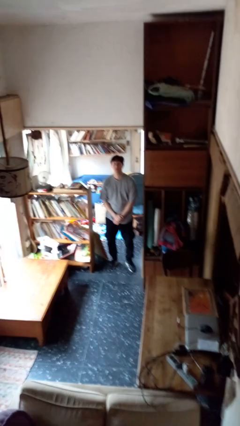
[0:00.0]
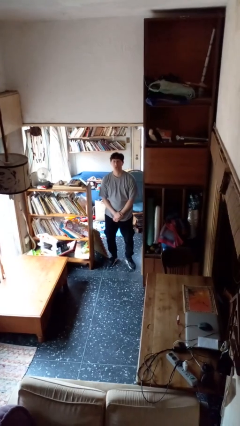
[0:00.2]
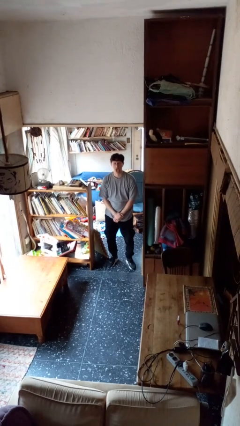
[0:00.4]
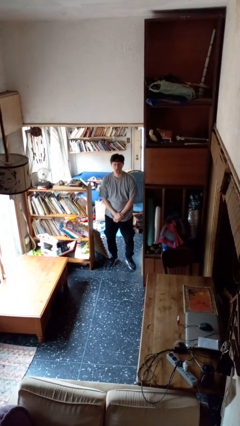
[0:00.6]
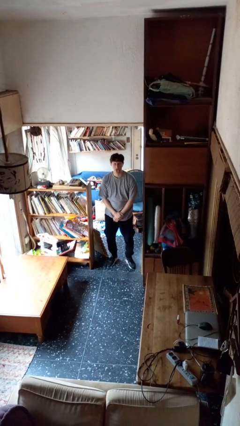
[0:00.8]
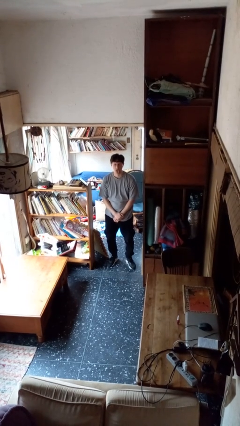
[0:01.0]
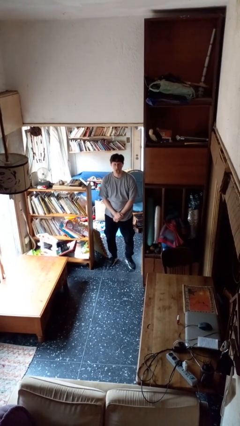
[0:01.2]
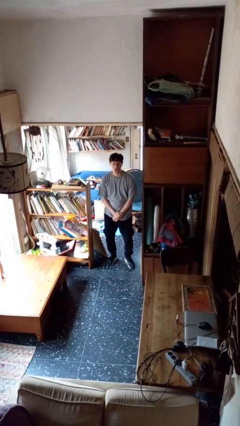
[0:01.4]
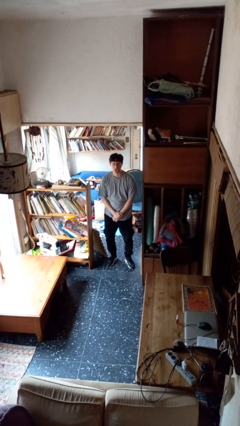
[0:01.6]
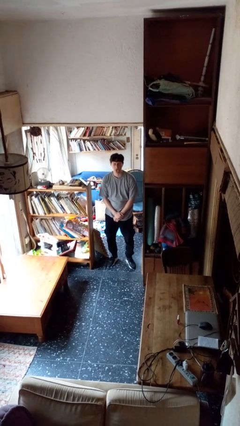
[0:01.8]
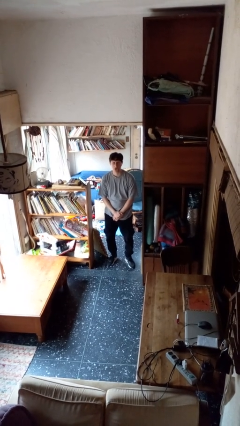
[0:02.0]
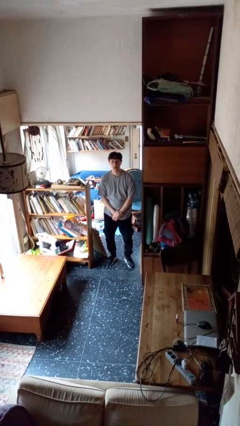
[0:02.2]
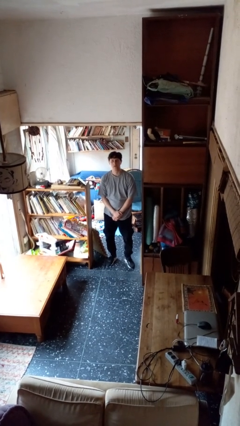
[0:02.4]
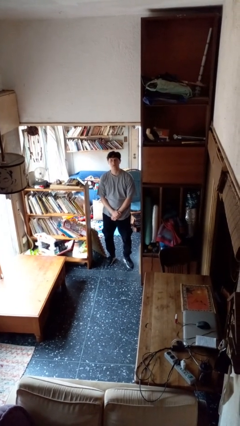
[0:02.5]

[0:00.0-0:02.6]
person sticks out tongue

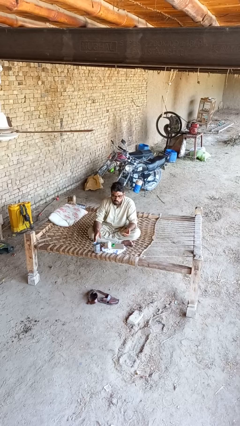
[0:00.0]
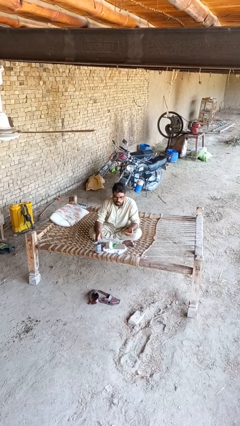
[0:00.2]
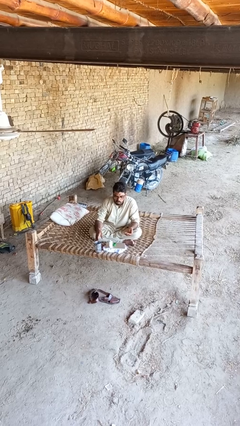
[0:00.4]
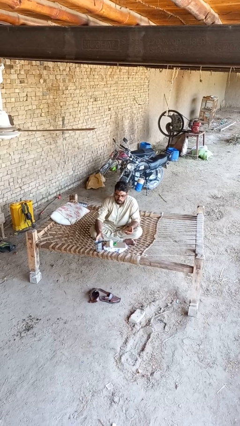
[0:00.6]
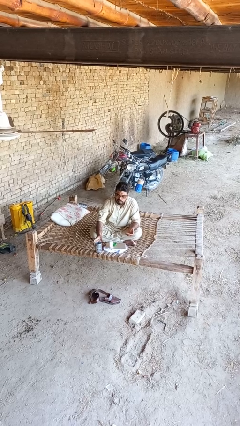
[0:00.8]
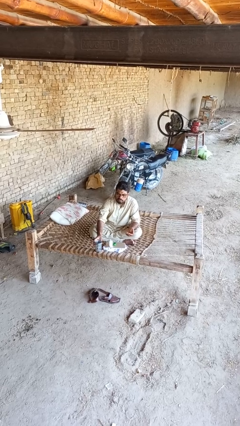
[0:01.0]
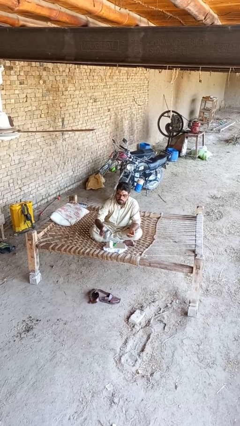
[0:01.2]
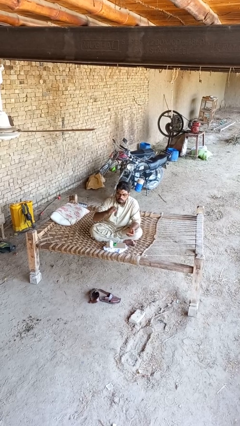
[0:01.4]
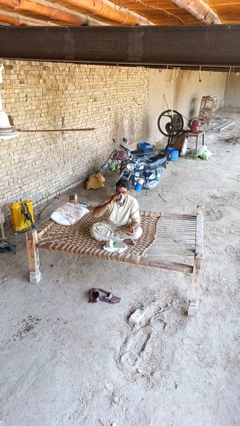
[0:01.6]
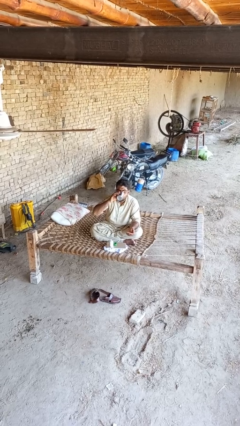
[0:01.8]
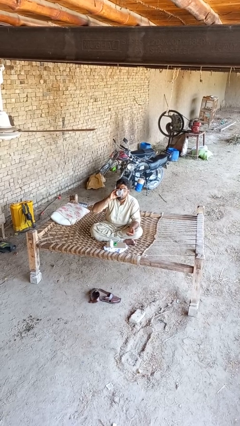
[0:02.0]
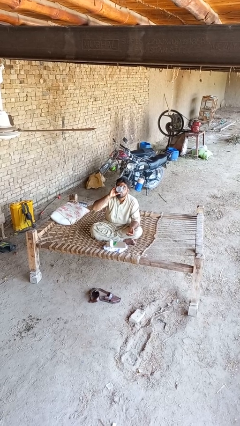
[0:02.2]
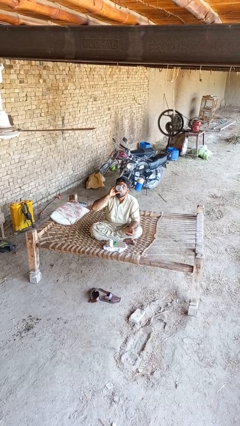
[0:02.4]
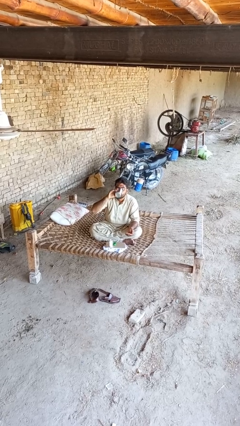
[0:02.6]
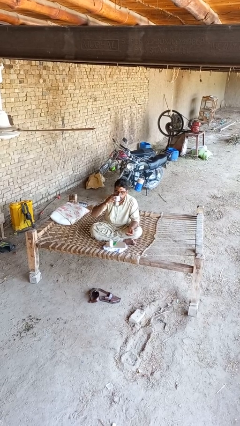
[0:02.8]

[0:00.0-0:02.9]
person drinks from cup

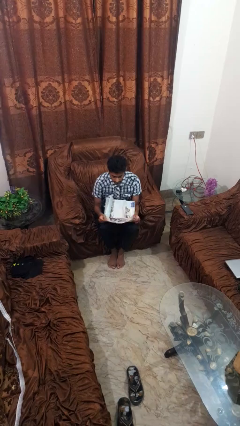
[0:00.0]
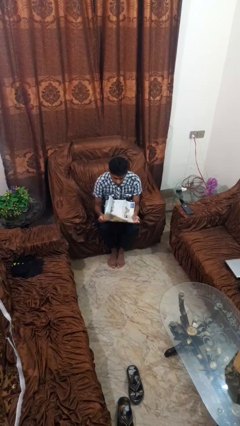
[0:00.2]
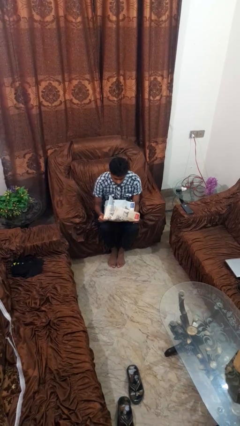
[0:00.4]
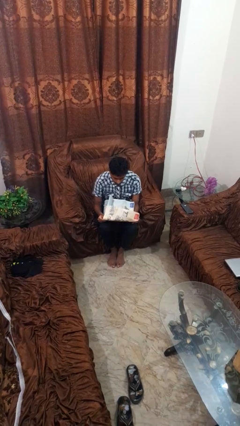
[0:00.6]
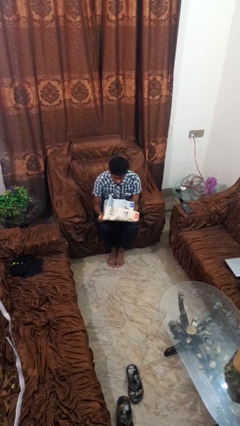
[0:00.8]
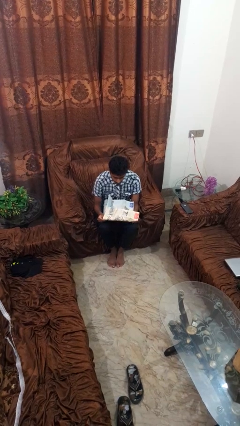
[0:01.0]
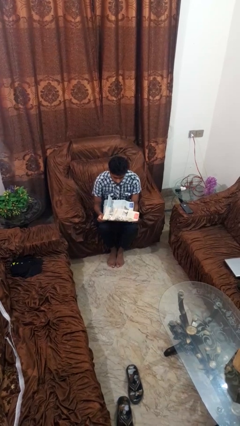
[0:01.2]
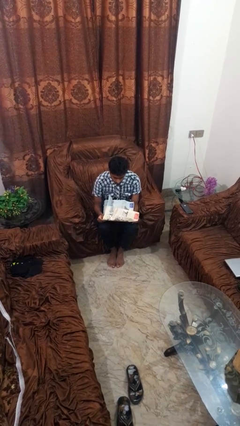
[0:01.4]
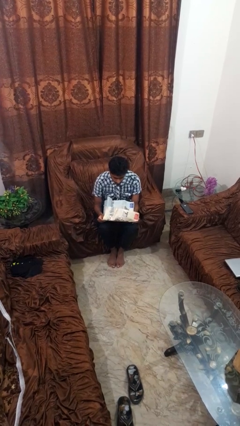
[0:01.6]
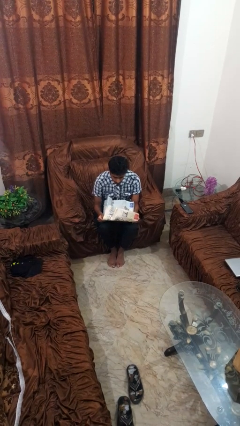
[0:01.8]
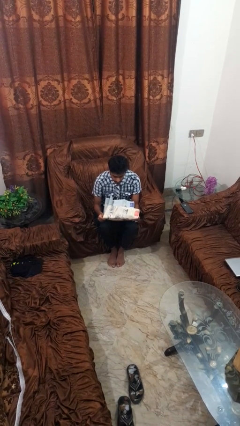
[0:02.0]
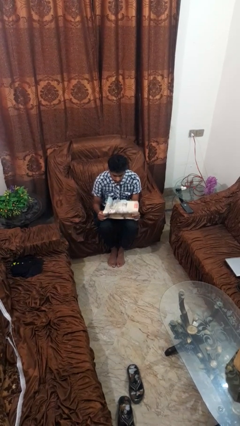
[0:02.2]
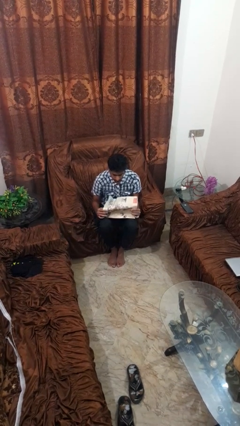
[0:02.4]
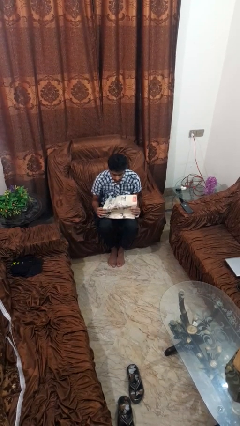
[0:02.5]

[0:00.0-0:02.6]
person reads newspaper

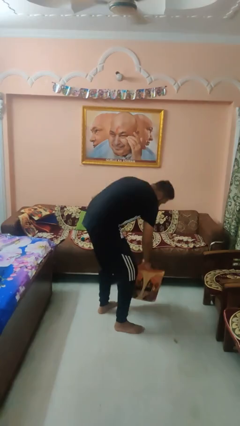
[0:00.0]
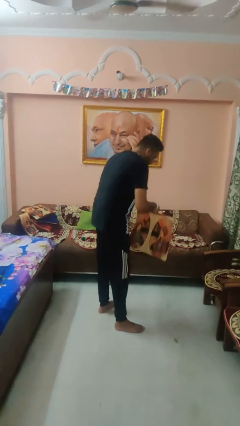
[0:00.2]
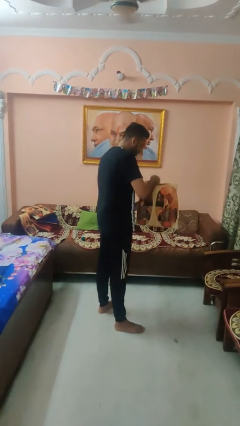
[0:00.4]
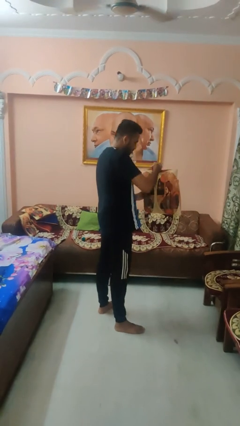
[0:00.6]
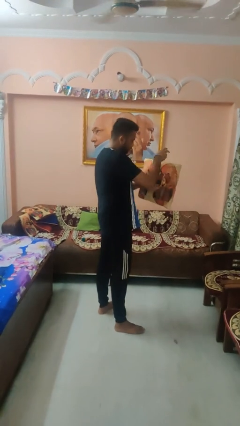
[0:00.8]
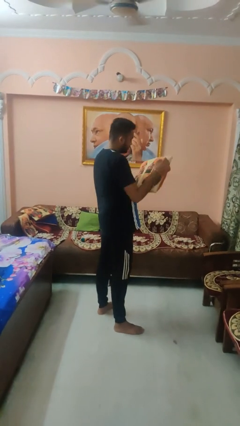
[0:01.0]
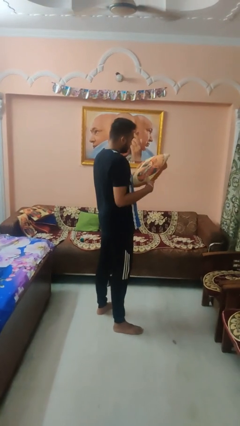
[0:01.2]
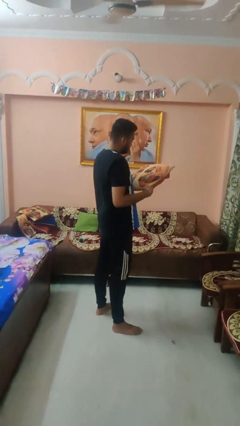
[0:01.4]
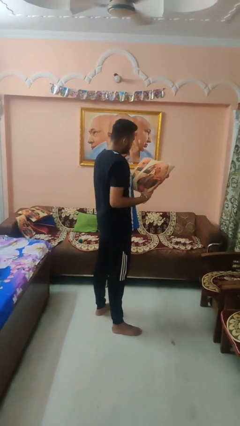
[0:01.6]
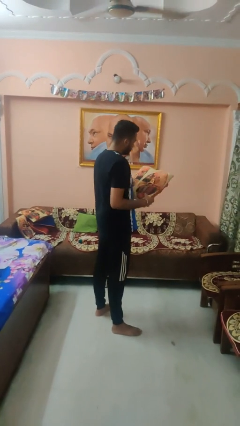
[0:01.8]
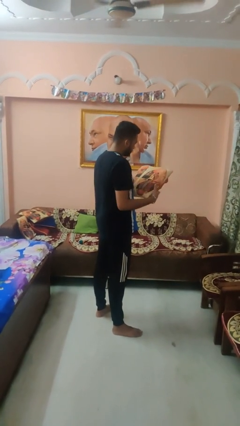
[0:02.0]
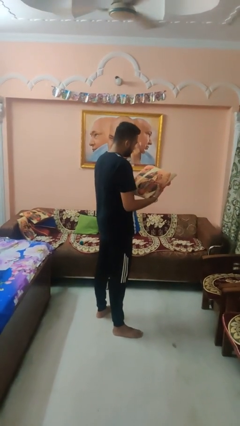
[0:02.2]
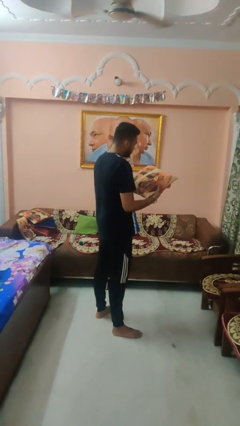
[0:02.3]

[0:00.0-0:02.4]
person picks up object from floor

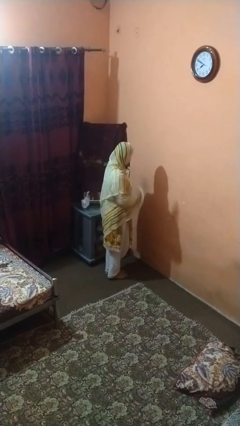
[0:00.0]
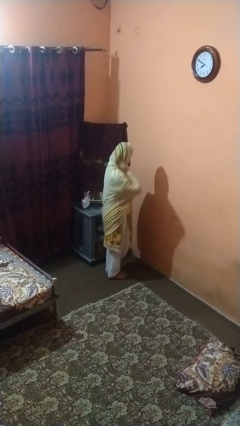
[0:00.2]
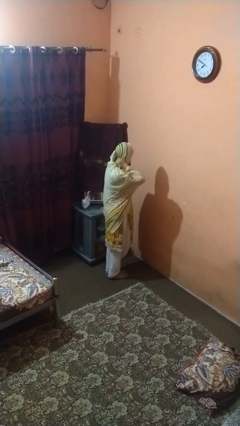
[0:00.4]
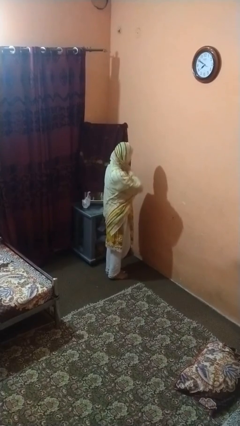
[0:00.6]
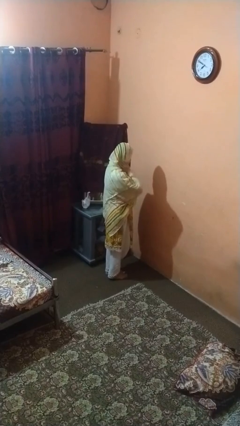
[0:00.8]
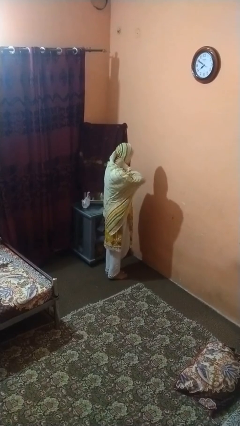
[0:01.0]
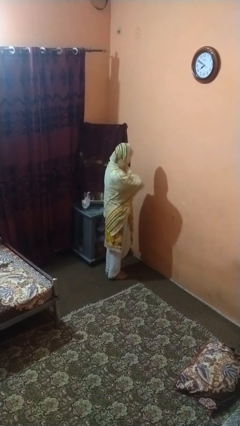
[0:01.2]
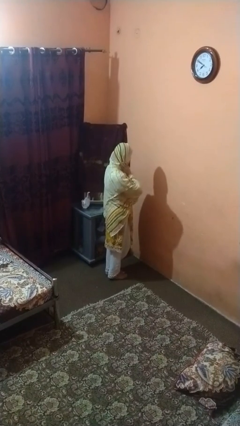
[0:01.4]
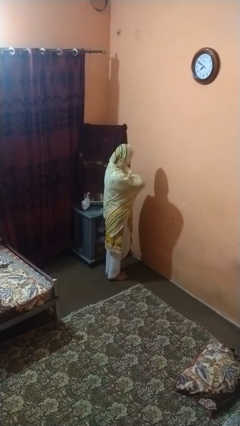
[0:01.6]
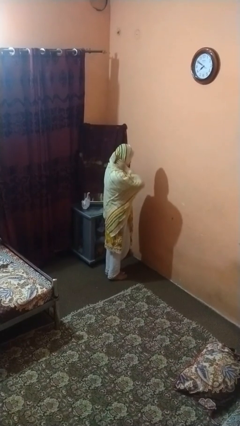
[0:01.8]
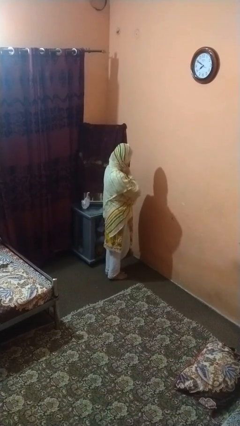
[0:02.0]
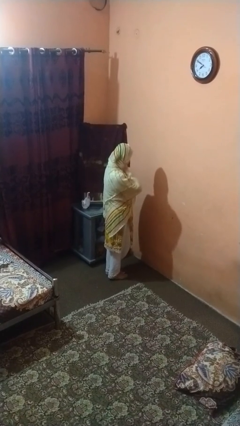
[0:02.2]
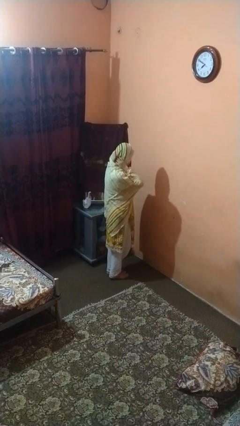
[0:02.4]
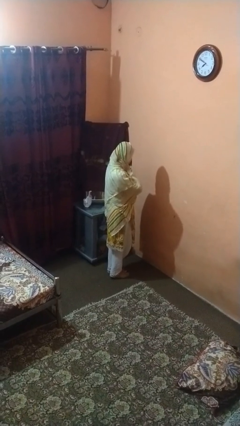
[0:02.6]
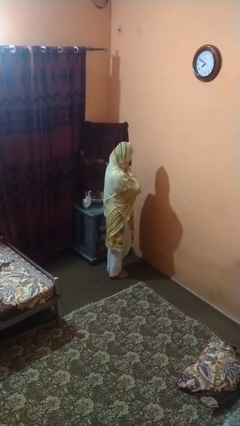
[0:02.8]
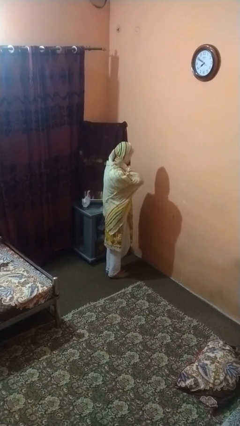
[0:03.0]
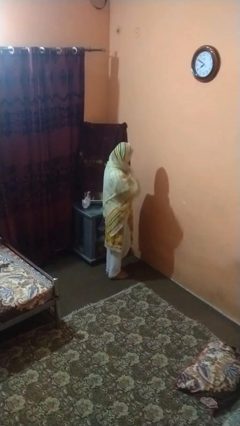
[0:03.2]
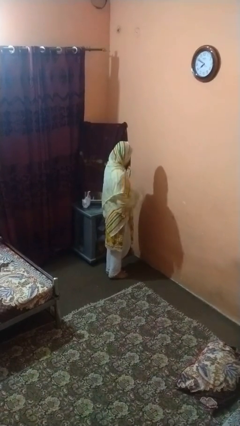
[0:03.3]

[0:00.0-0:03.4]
person rubs neck

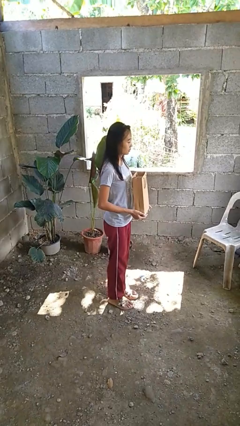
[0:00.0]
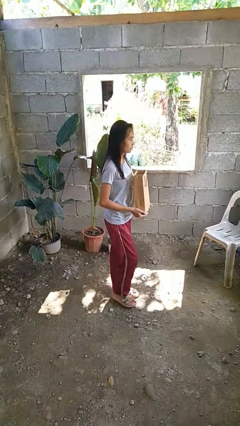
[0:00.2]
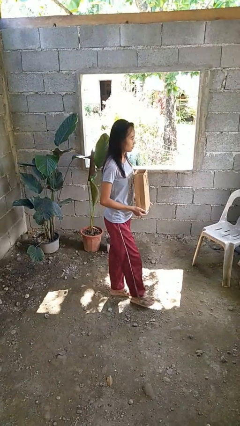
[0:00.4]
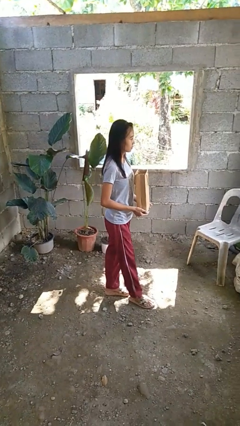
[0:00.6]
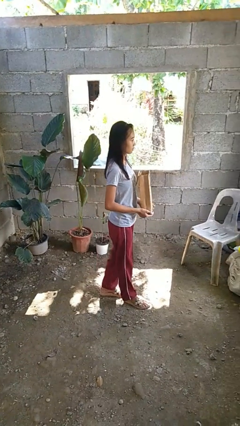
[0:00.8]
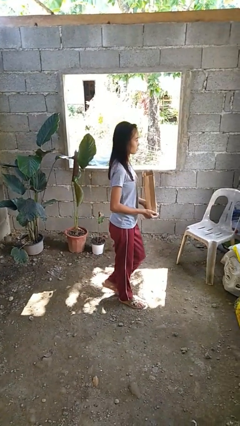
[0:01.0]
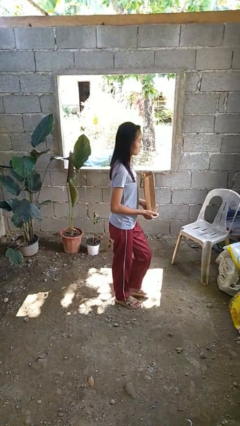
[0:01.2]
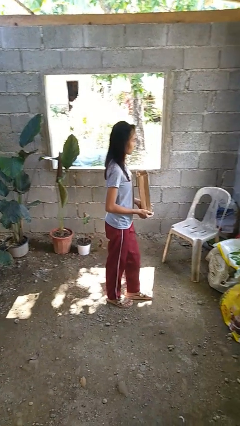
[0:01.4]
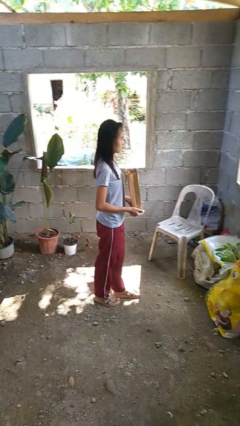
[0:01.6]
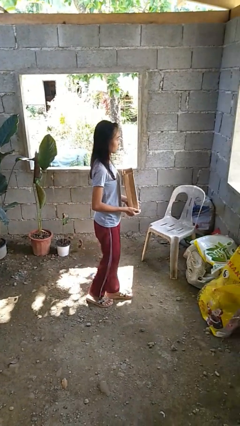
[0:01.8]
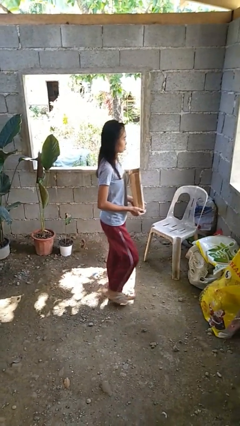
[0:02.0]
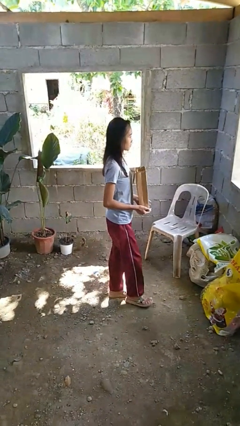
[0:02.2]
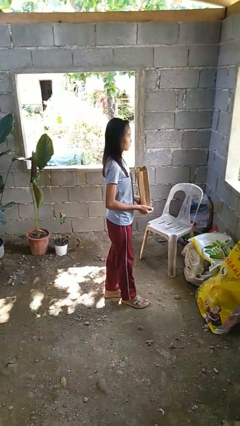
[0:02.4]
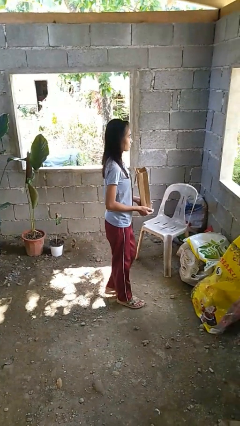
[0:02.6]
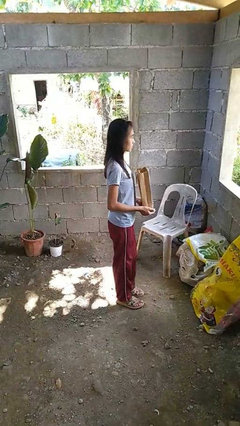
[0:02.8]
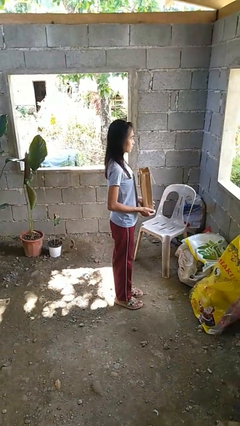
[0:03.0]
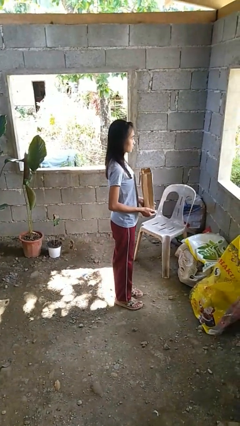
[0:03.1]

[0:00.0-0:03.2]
person carries groceries

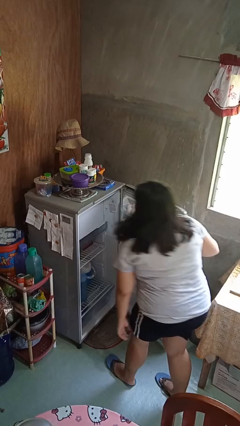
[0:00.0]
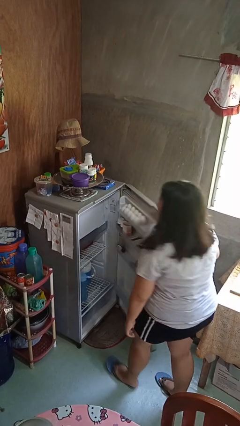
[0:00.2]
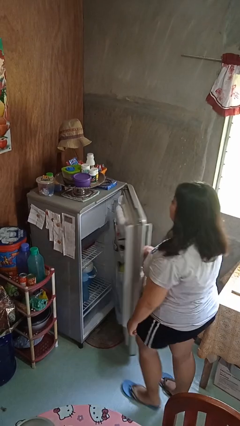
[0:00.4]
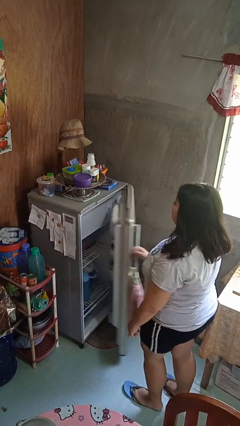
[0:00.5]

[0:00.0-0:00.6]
person closes refrigerator
